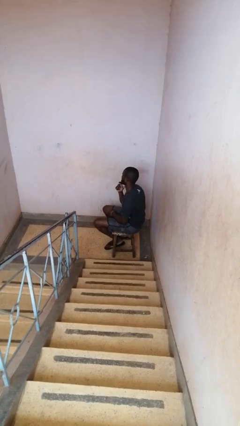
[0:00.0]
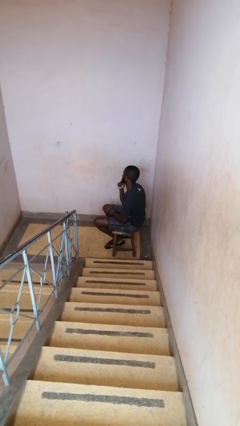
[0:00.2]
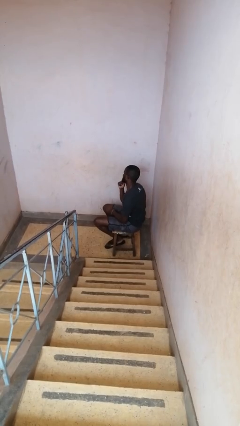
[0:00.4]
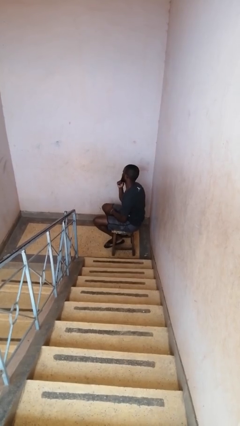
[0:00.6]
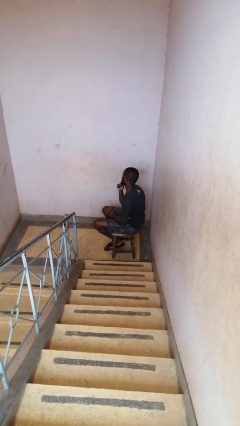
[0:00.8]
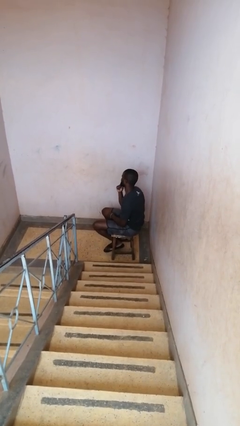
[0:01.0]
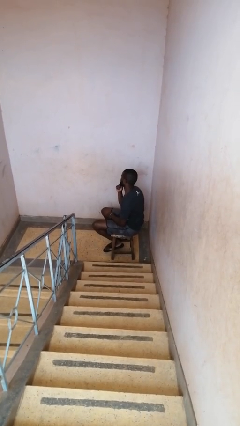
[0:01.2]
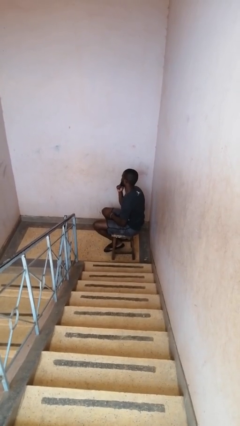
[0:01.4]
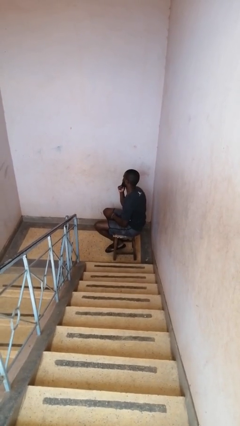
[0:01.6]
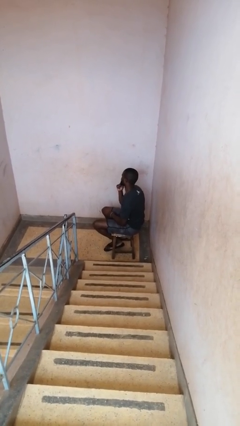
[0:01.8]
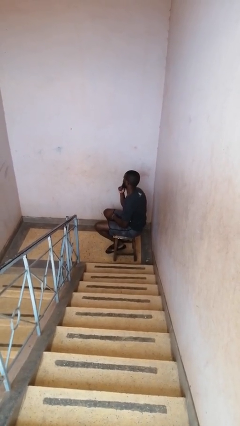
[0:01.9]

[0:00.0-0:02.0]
person strokes chin

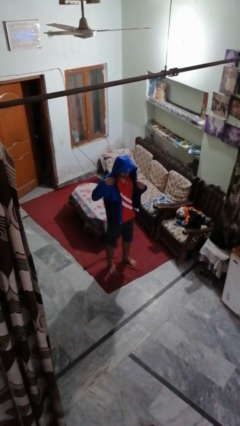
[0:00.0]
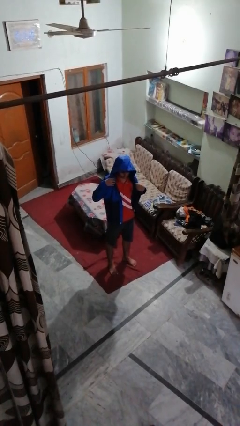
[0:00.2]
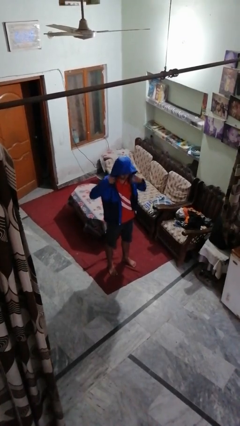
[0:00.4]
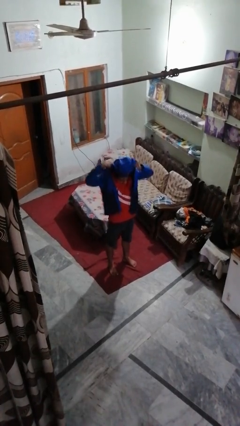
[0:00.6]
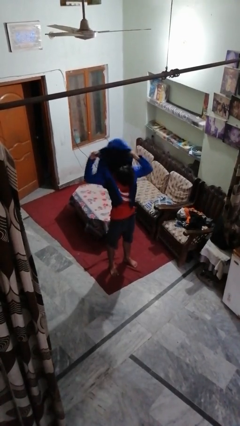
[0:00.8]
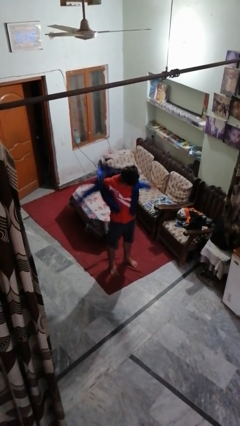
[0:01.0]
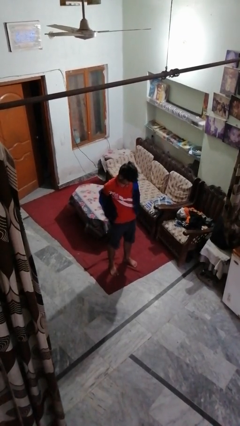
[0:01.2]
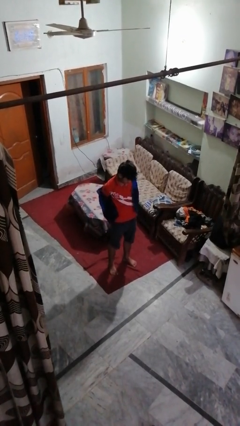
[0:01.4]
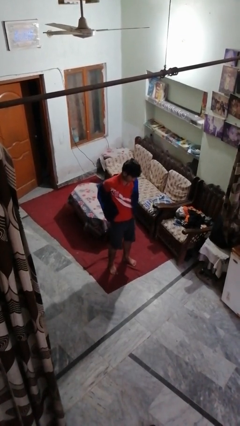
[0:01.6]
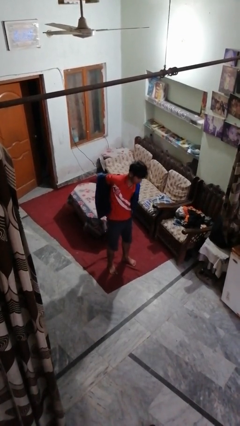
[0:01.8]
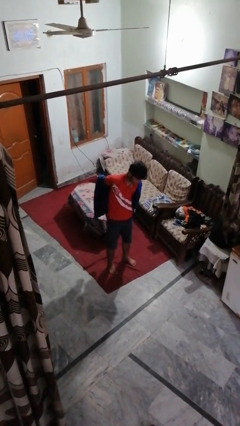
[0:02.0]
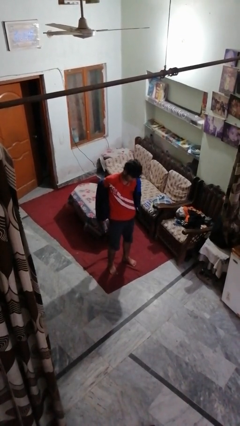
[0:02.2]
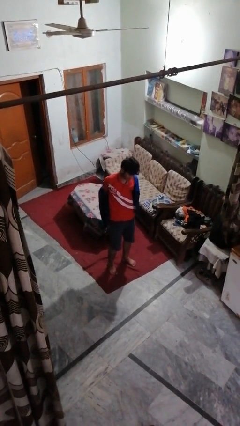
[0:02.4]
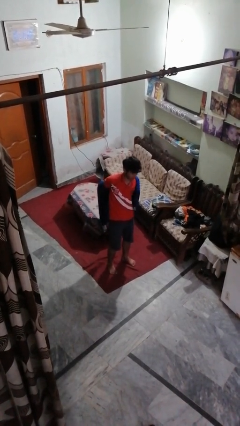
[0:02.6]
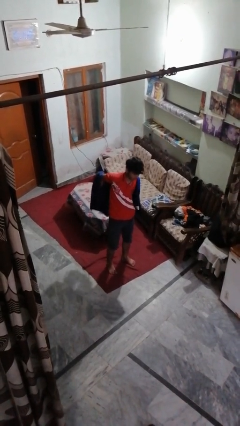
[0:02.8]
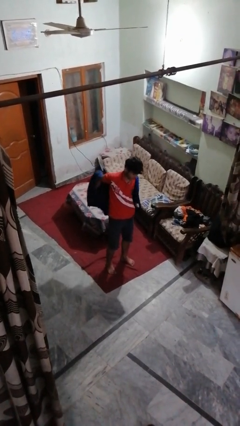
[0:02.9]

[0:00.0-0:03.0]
person takes off hoodie

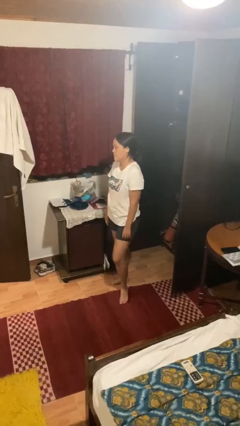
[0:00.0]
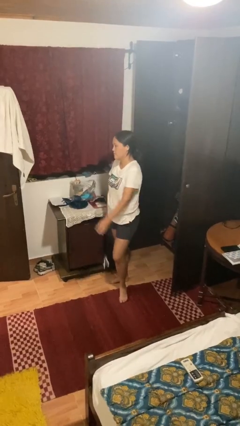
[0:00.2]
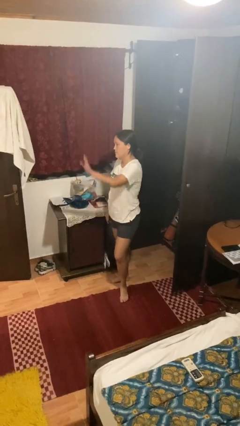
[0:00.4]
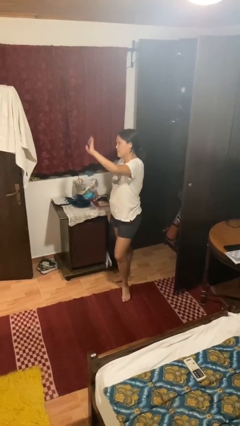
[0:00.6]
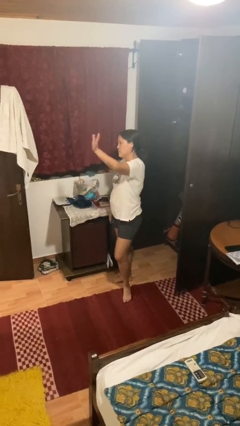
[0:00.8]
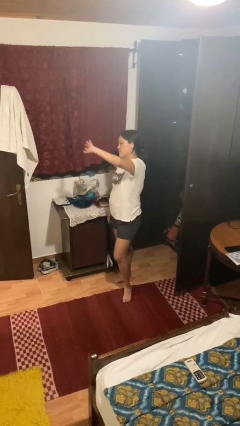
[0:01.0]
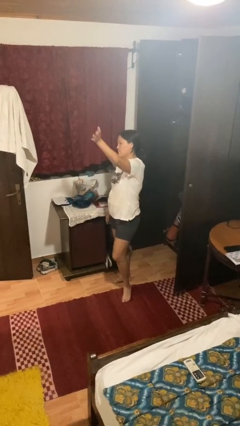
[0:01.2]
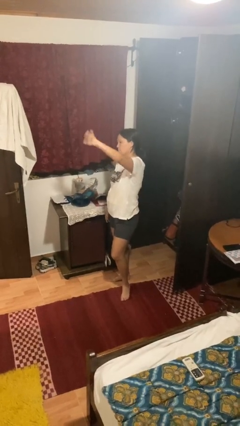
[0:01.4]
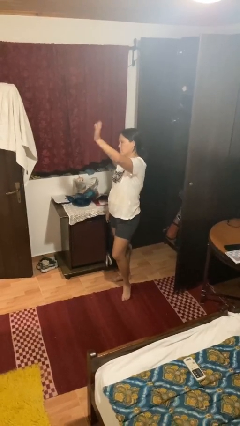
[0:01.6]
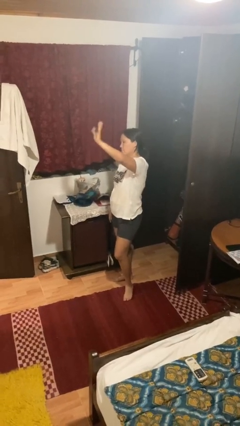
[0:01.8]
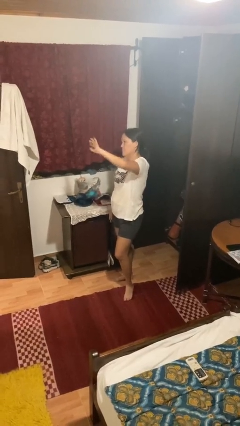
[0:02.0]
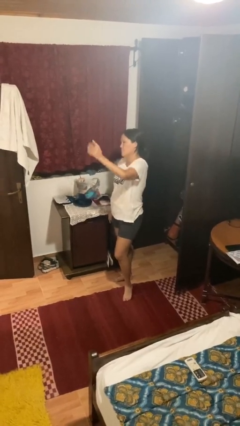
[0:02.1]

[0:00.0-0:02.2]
person waves at person

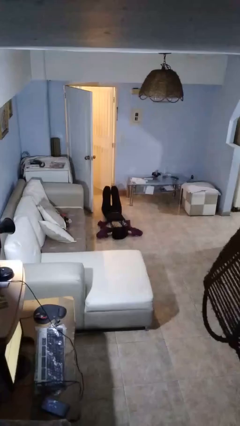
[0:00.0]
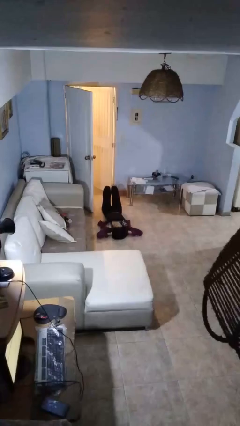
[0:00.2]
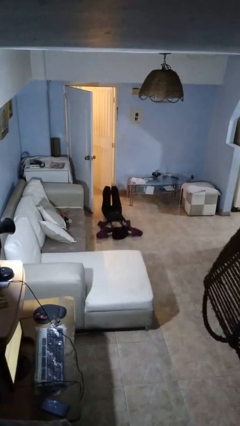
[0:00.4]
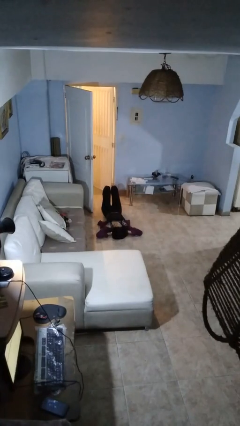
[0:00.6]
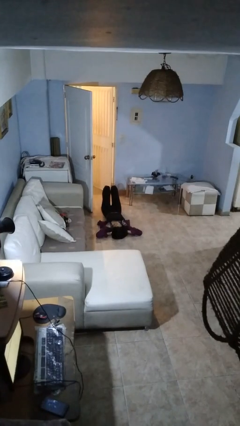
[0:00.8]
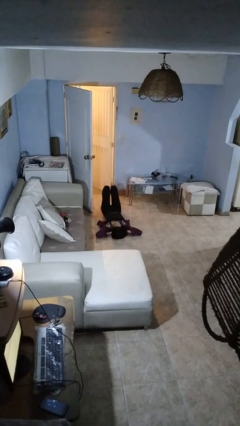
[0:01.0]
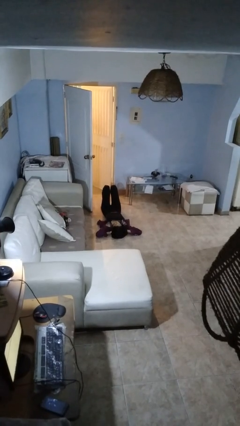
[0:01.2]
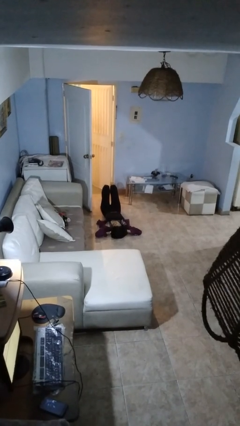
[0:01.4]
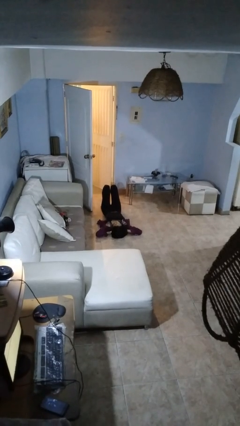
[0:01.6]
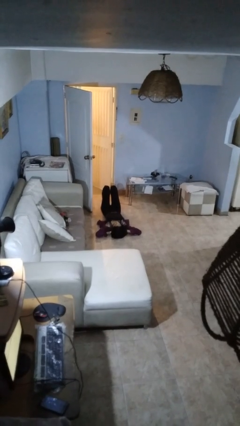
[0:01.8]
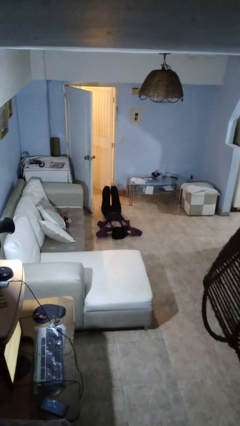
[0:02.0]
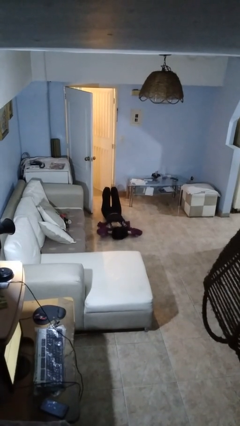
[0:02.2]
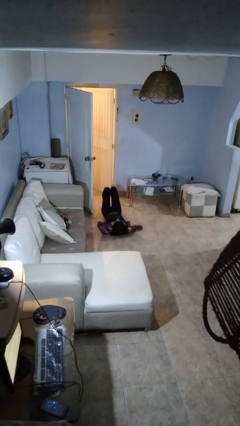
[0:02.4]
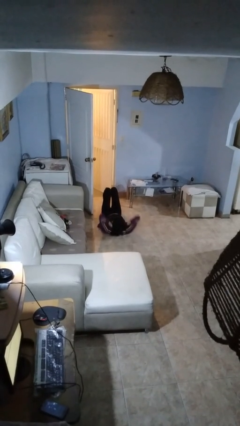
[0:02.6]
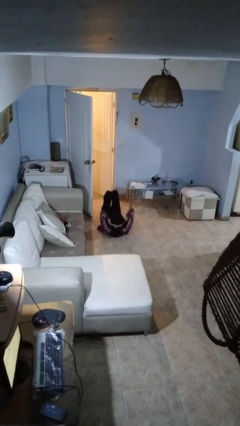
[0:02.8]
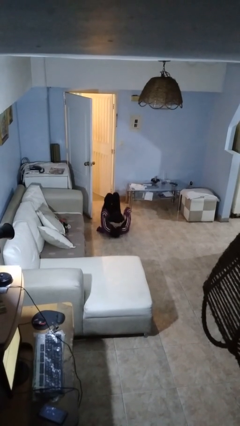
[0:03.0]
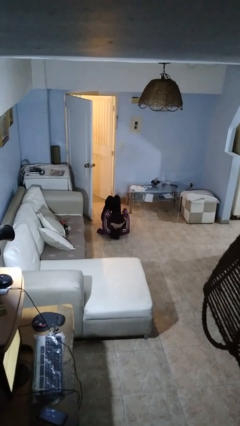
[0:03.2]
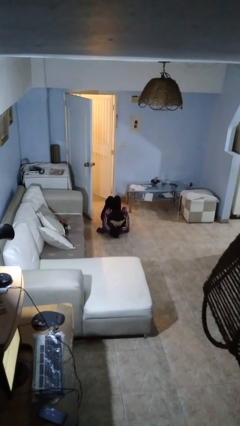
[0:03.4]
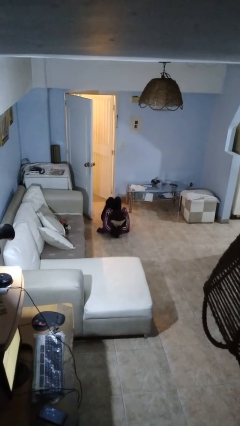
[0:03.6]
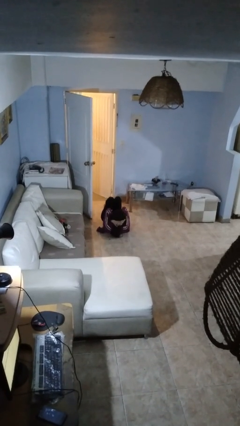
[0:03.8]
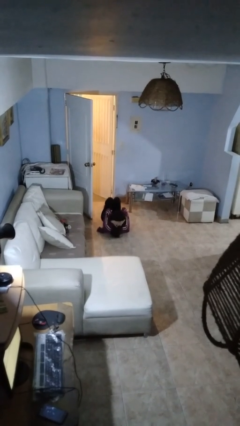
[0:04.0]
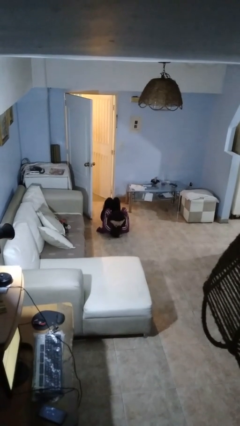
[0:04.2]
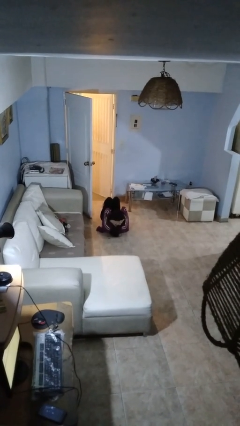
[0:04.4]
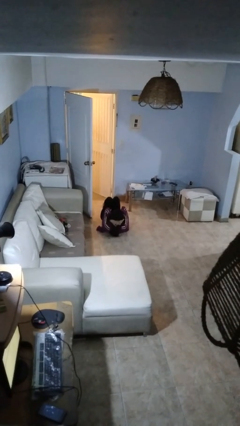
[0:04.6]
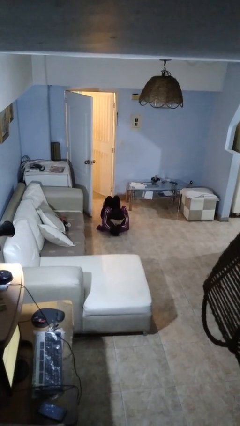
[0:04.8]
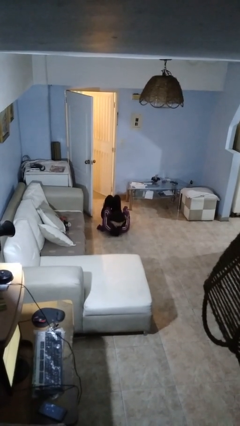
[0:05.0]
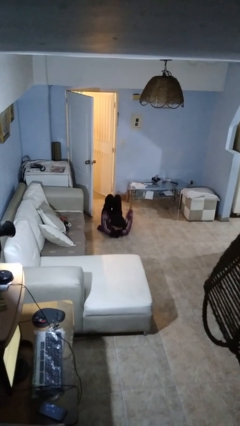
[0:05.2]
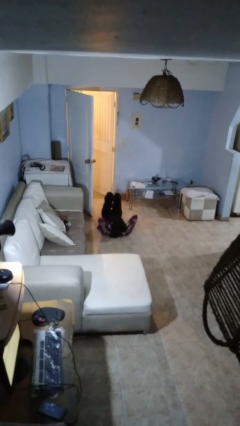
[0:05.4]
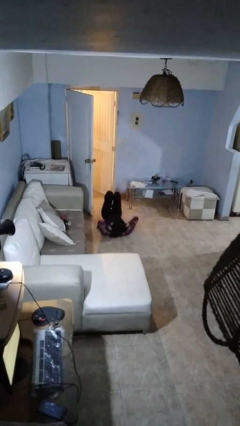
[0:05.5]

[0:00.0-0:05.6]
person exercises with situp

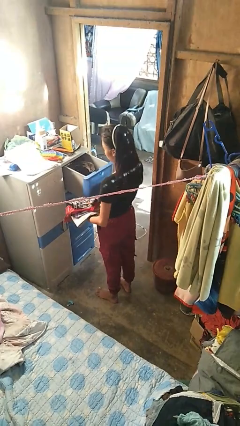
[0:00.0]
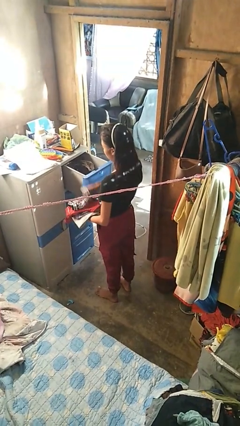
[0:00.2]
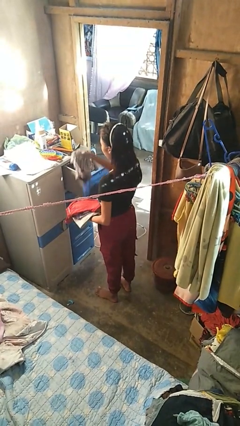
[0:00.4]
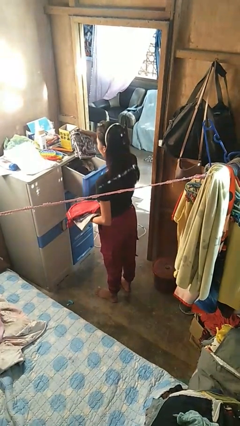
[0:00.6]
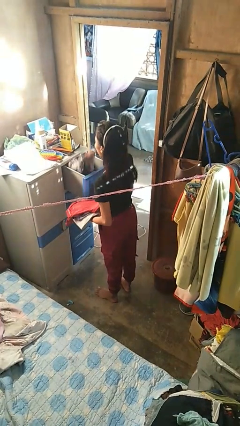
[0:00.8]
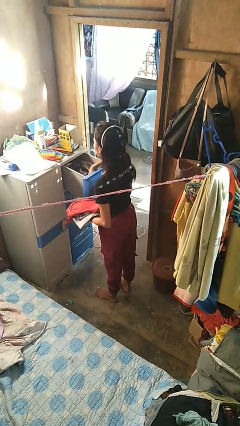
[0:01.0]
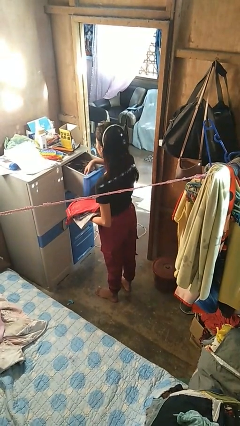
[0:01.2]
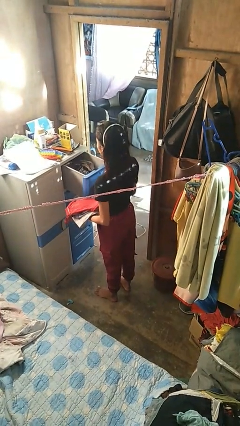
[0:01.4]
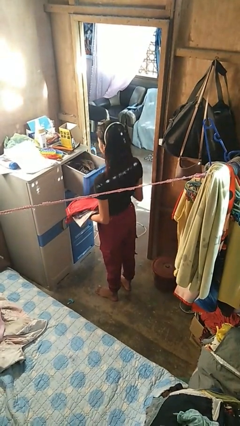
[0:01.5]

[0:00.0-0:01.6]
person puts clothes into dresser

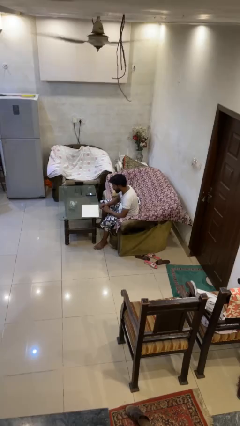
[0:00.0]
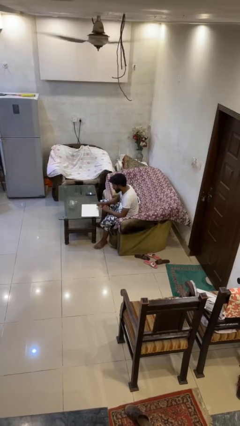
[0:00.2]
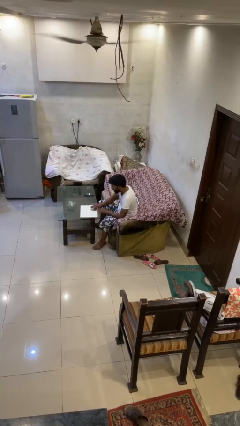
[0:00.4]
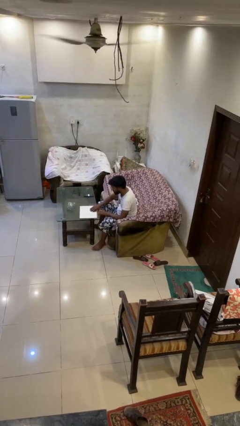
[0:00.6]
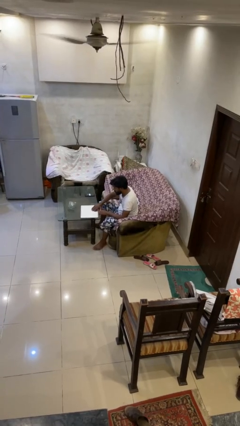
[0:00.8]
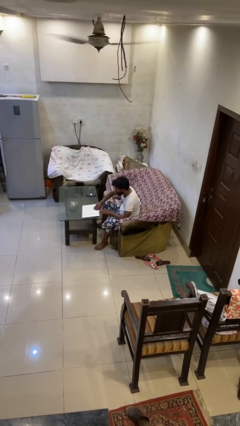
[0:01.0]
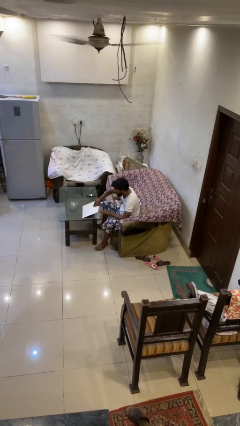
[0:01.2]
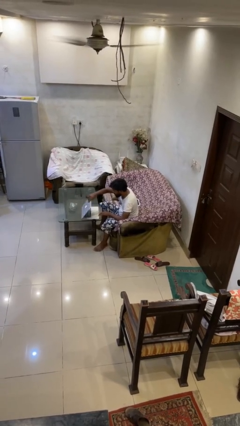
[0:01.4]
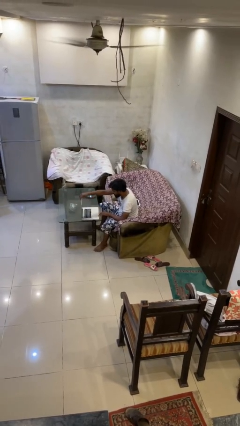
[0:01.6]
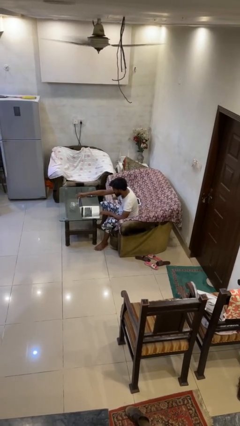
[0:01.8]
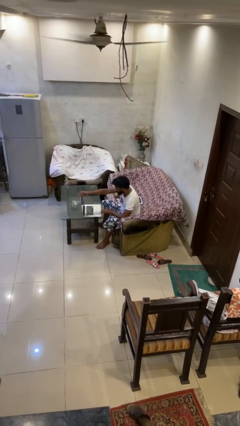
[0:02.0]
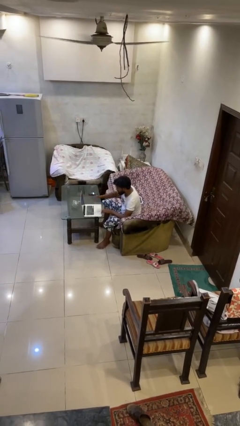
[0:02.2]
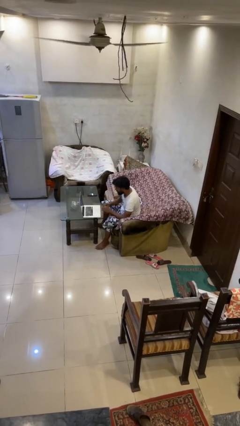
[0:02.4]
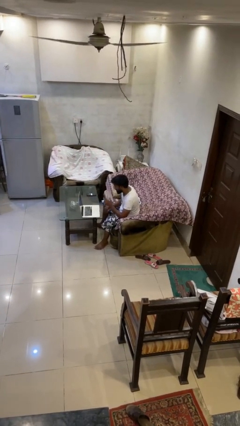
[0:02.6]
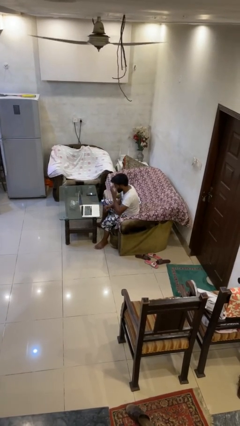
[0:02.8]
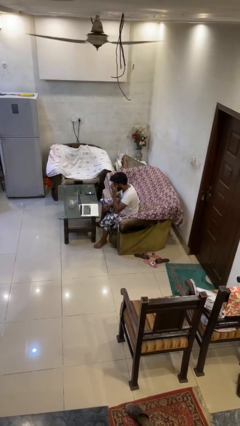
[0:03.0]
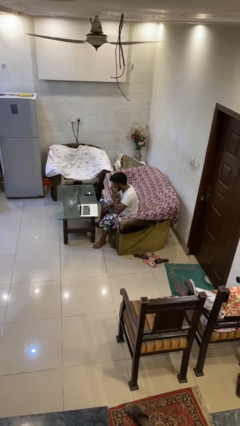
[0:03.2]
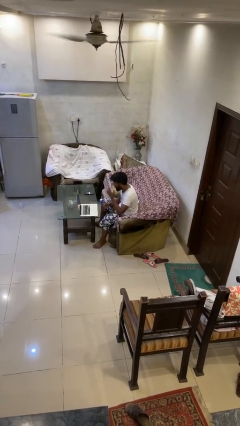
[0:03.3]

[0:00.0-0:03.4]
person opens laptop
